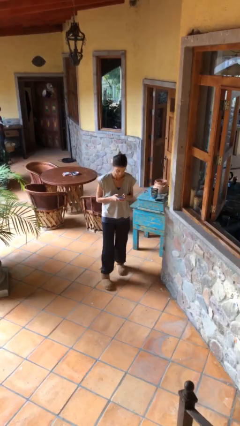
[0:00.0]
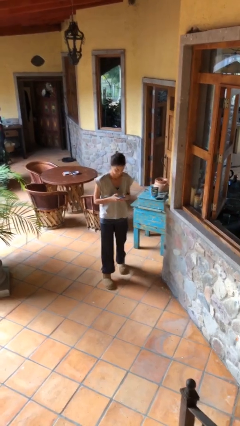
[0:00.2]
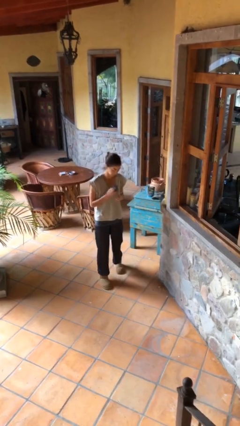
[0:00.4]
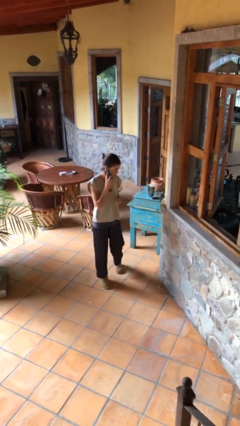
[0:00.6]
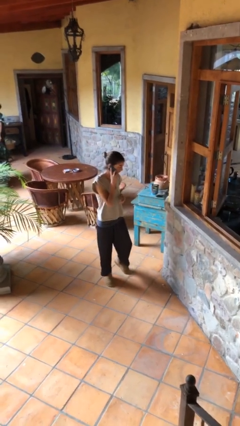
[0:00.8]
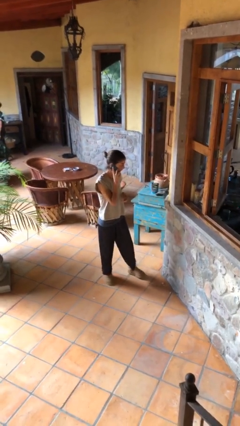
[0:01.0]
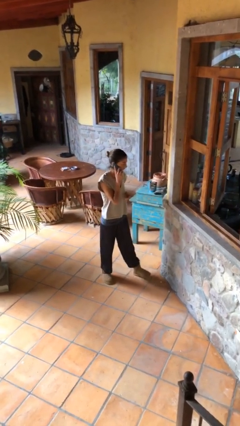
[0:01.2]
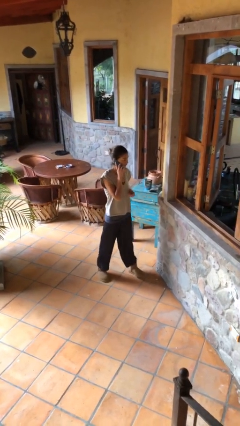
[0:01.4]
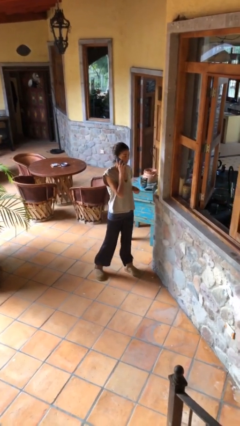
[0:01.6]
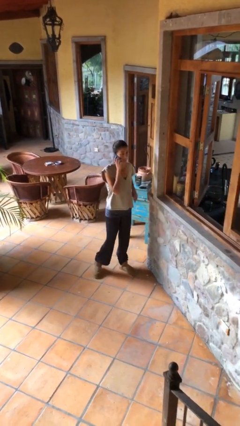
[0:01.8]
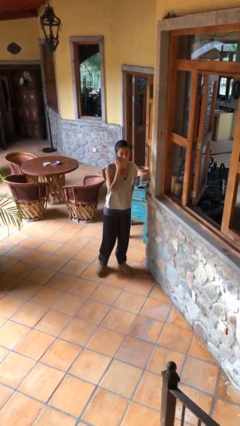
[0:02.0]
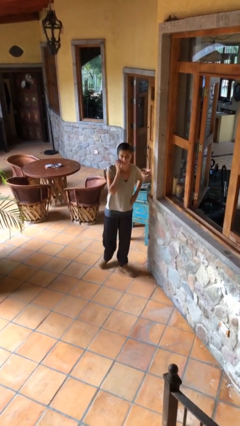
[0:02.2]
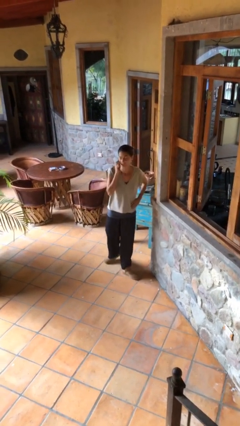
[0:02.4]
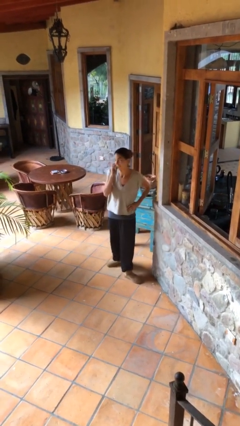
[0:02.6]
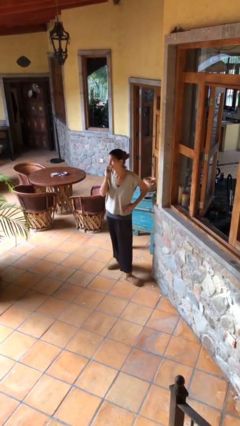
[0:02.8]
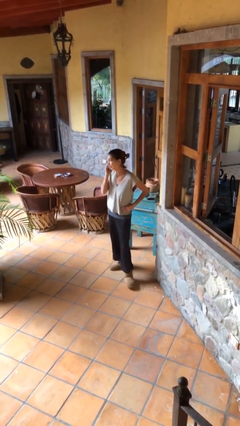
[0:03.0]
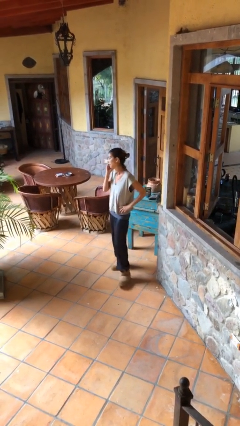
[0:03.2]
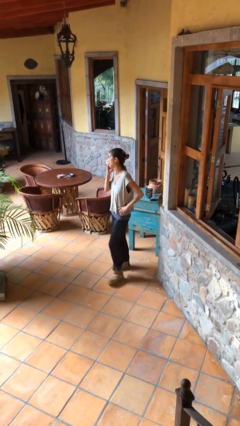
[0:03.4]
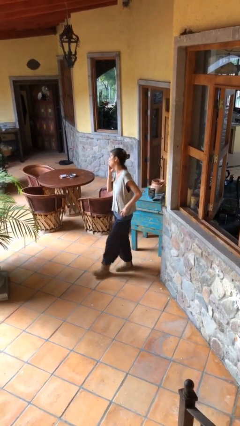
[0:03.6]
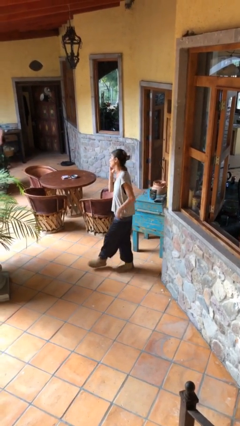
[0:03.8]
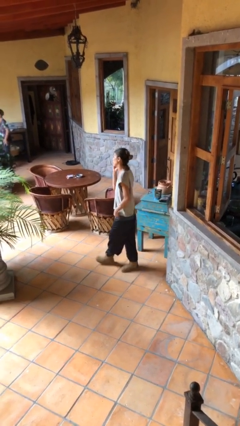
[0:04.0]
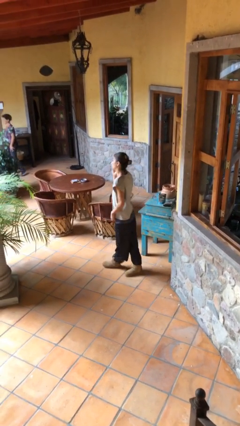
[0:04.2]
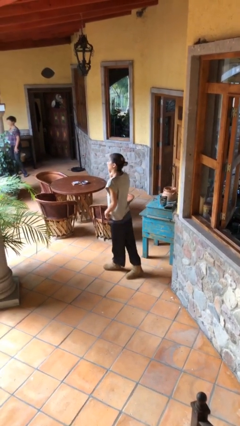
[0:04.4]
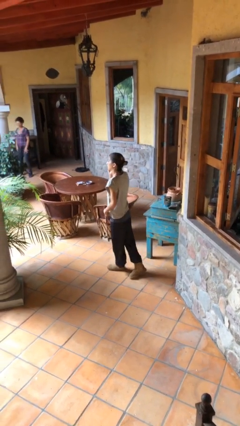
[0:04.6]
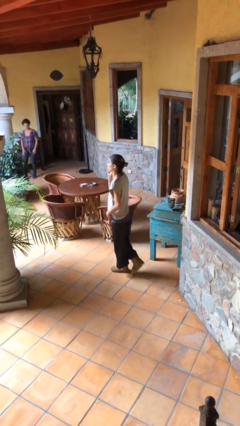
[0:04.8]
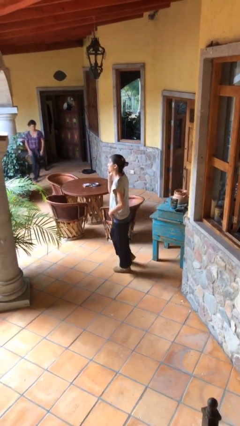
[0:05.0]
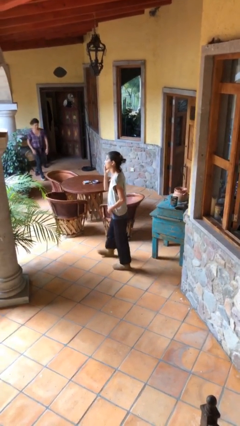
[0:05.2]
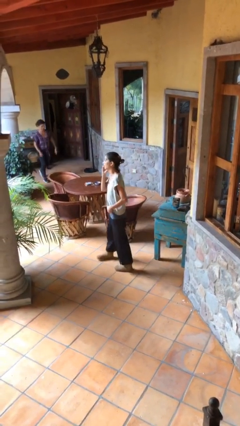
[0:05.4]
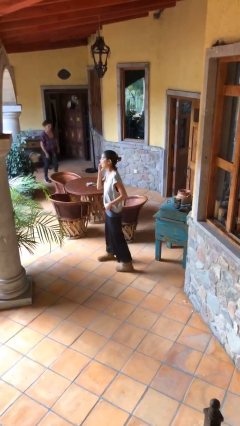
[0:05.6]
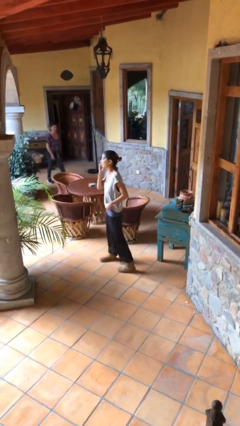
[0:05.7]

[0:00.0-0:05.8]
person talks on phone

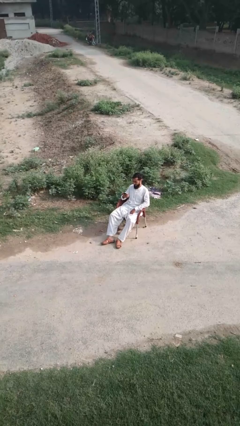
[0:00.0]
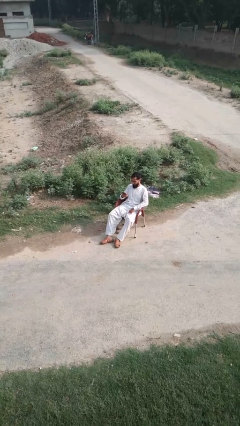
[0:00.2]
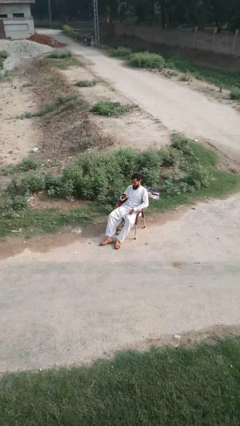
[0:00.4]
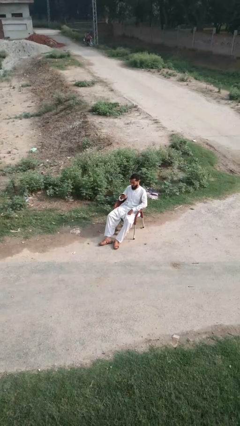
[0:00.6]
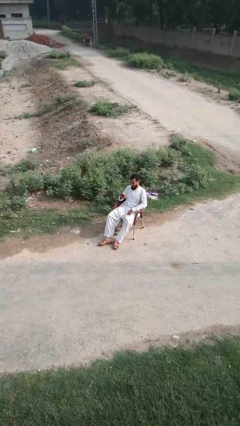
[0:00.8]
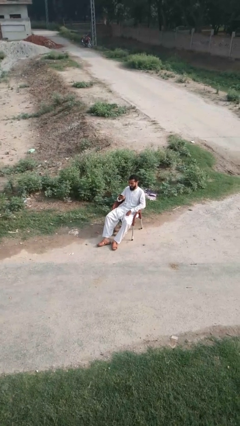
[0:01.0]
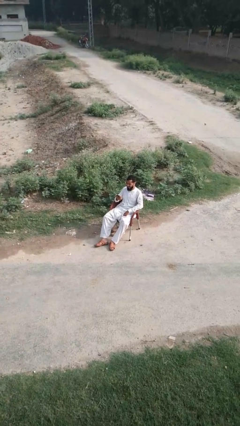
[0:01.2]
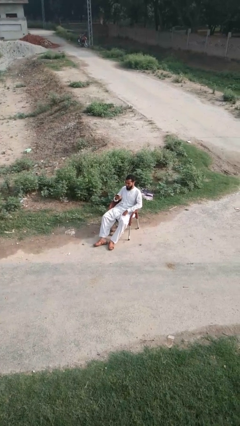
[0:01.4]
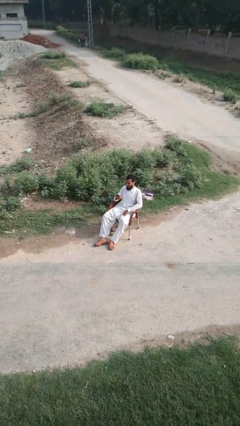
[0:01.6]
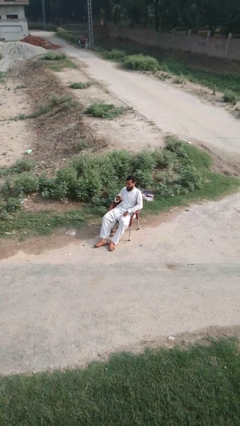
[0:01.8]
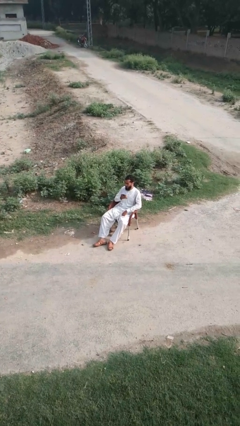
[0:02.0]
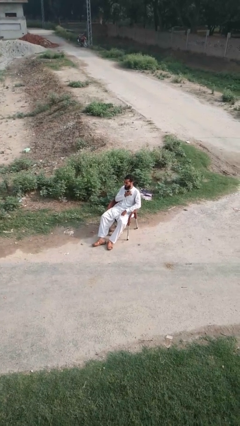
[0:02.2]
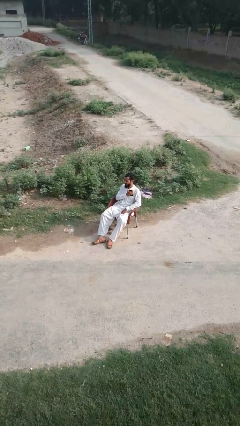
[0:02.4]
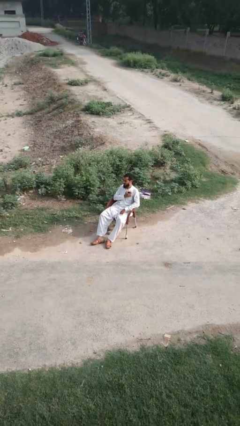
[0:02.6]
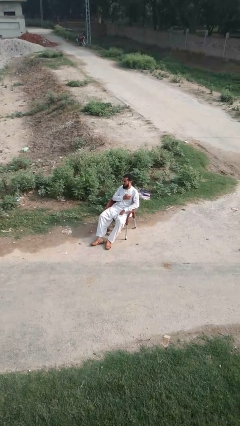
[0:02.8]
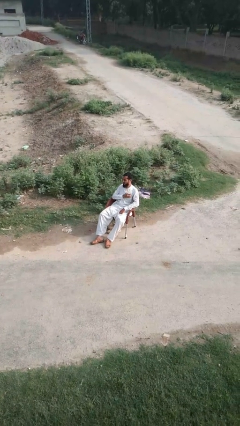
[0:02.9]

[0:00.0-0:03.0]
person puts phone into pocket

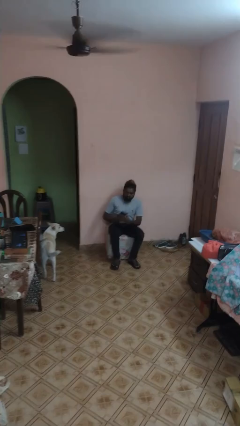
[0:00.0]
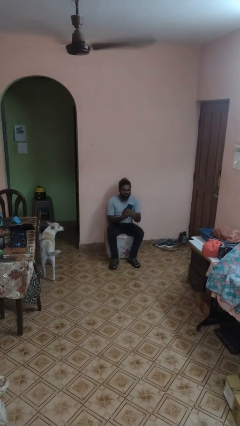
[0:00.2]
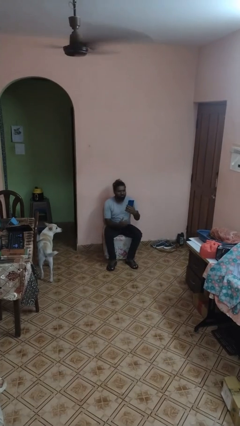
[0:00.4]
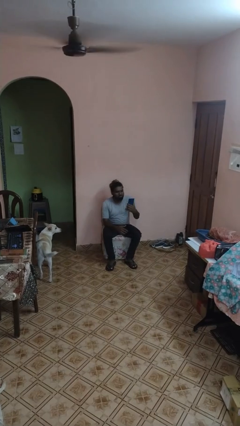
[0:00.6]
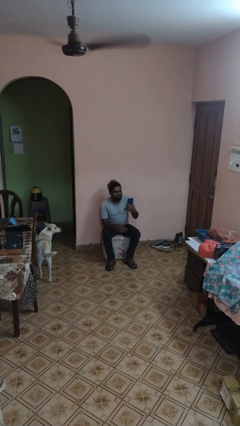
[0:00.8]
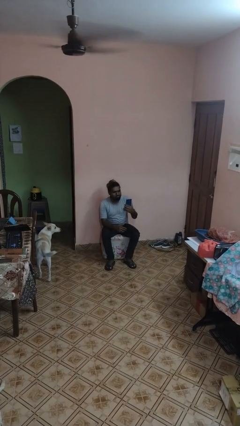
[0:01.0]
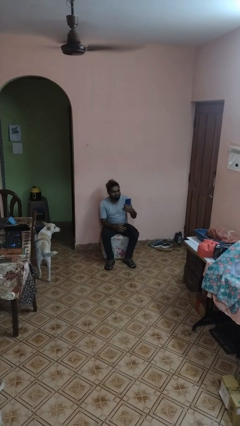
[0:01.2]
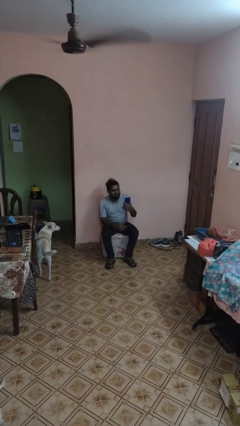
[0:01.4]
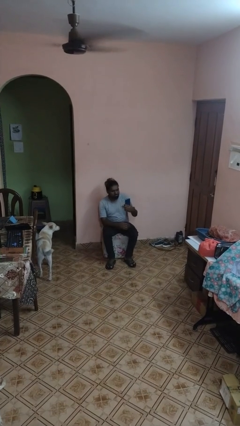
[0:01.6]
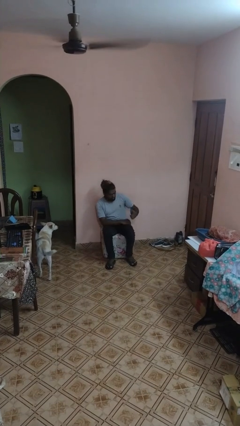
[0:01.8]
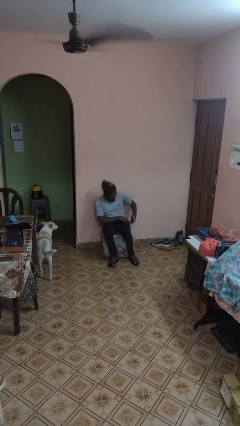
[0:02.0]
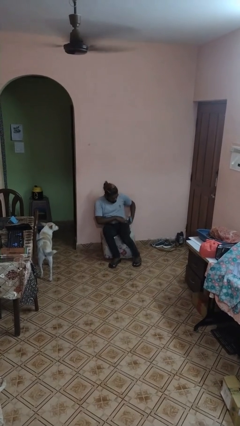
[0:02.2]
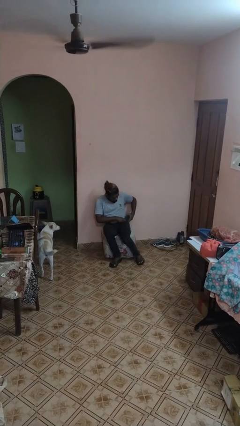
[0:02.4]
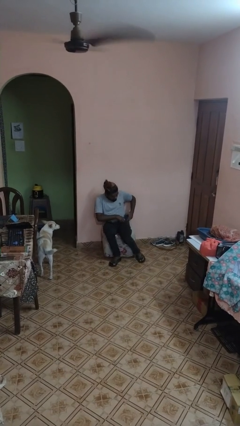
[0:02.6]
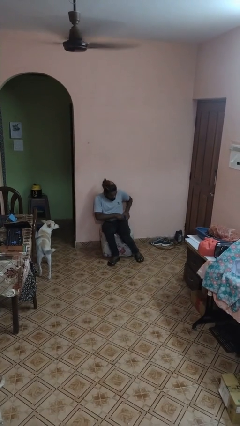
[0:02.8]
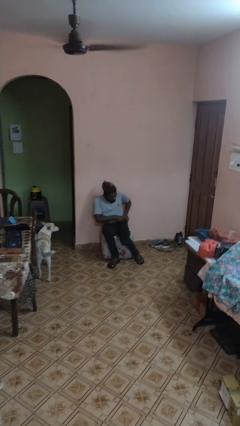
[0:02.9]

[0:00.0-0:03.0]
person takes phone from pocket

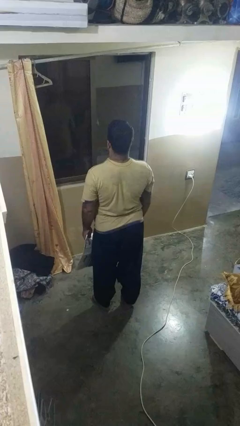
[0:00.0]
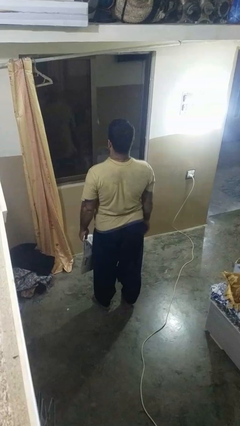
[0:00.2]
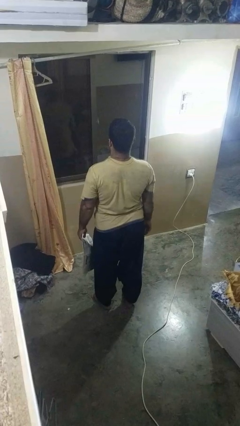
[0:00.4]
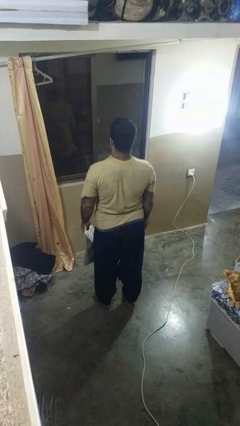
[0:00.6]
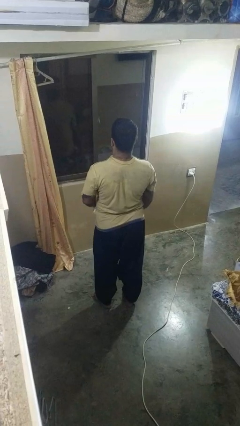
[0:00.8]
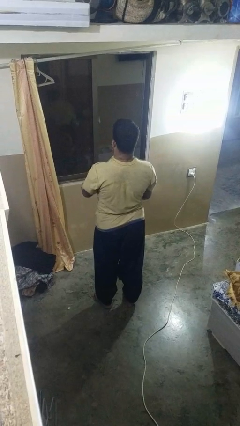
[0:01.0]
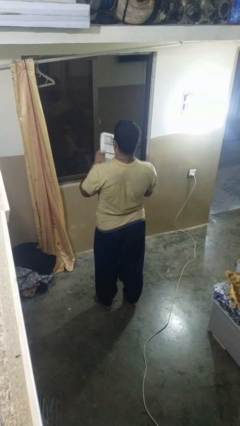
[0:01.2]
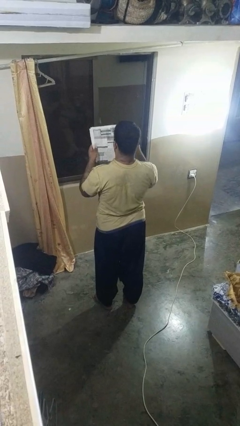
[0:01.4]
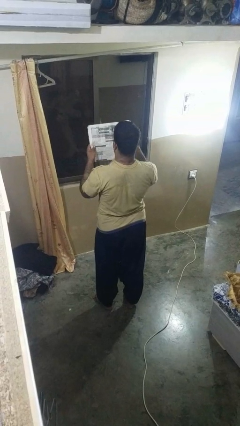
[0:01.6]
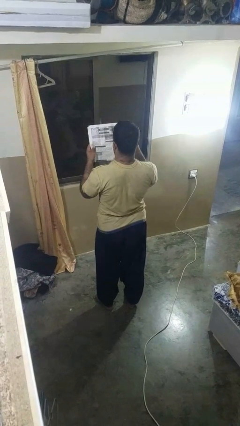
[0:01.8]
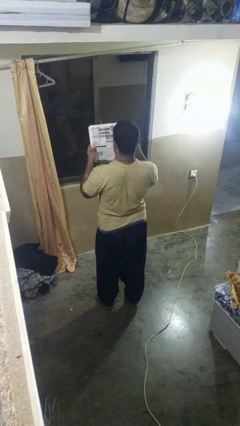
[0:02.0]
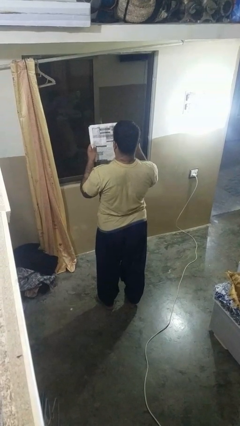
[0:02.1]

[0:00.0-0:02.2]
person reads newspaper

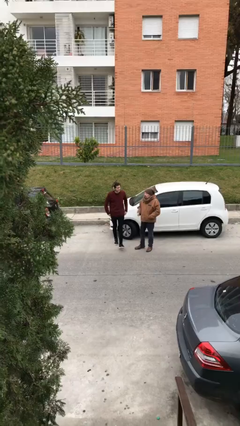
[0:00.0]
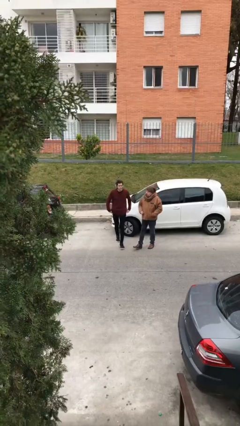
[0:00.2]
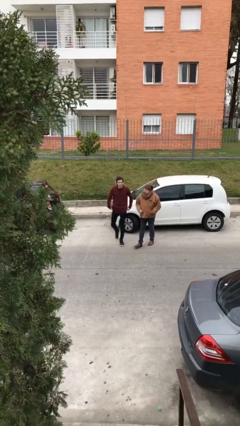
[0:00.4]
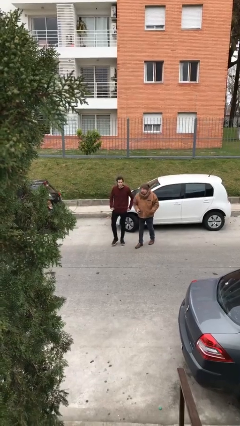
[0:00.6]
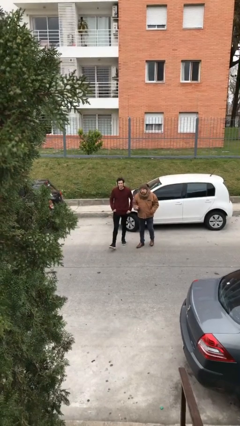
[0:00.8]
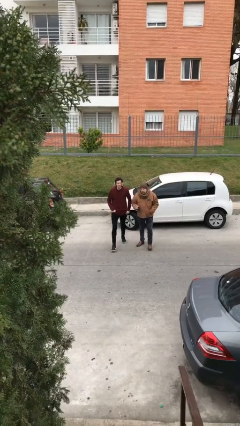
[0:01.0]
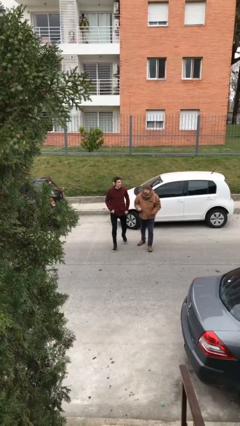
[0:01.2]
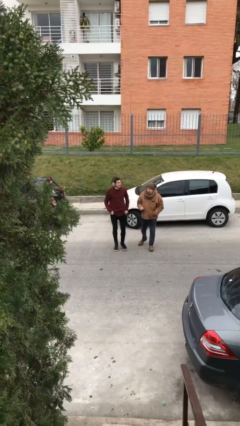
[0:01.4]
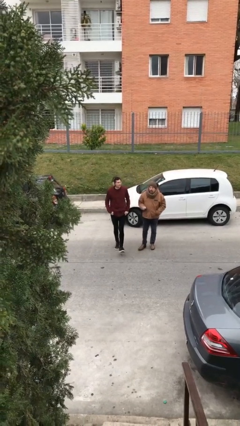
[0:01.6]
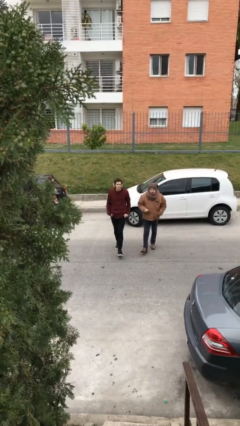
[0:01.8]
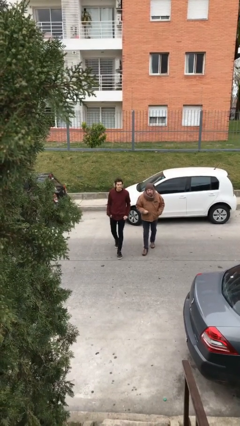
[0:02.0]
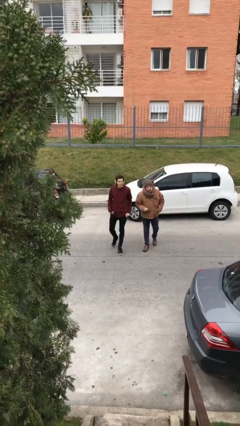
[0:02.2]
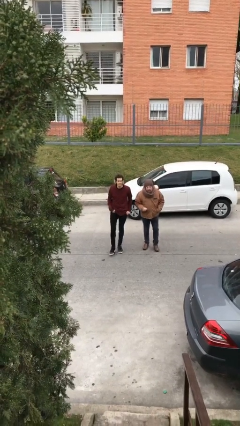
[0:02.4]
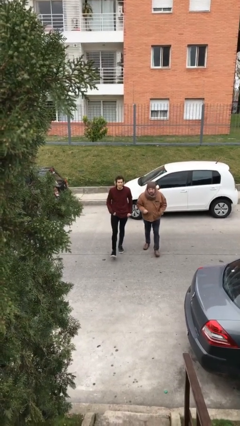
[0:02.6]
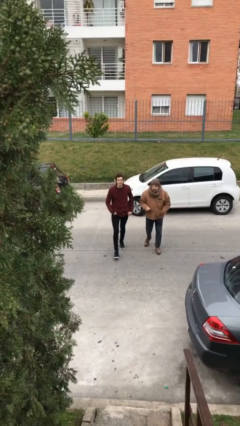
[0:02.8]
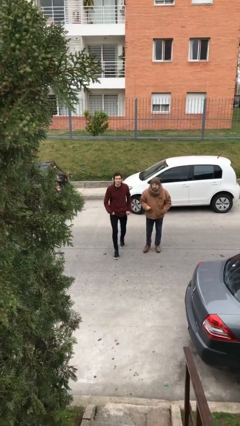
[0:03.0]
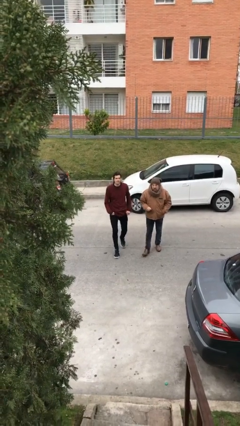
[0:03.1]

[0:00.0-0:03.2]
person talks to person
